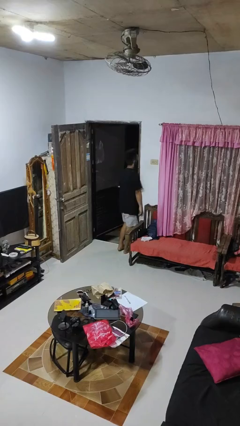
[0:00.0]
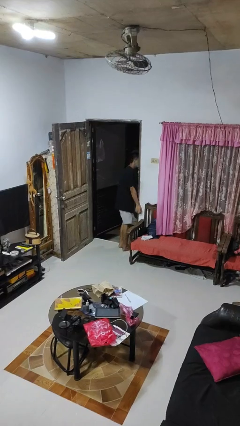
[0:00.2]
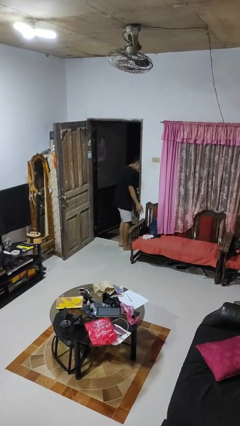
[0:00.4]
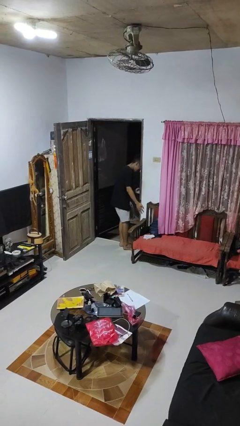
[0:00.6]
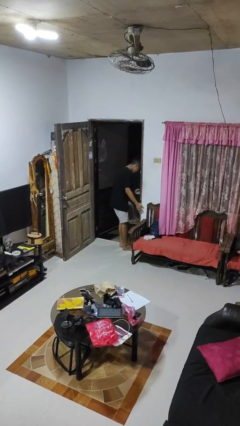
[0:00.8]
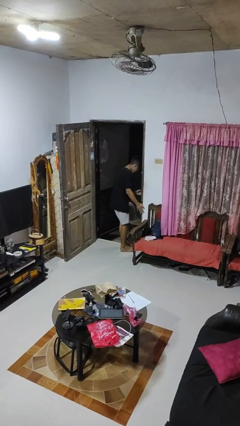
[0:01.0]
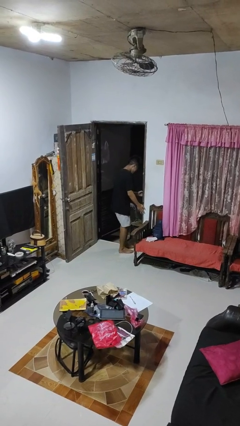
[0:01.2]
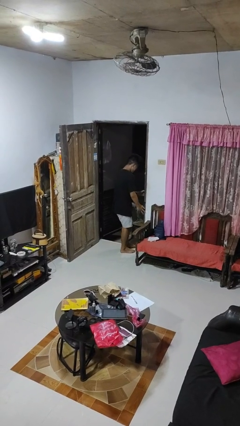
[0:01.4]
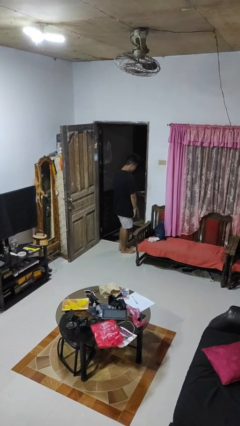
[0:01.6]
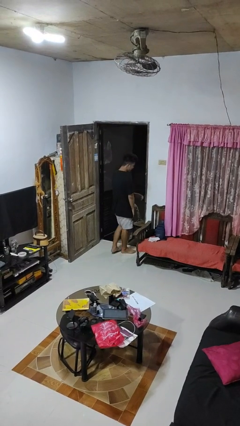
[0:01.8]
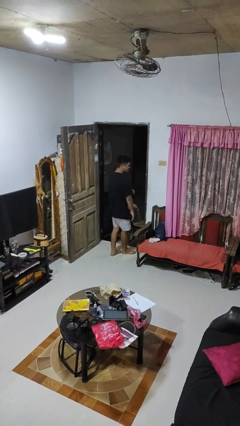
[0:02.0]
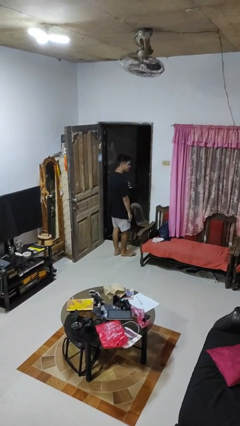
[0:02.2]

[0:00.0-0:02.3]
person bumps into wall

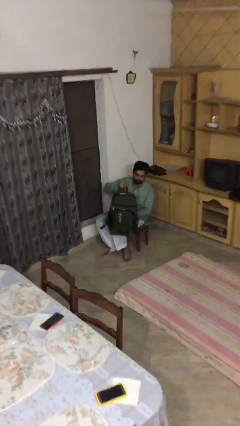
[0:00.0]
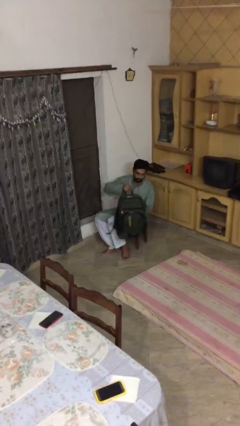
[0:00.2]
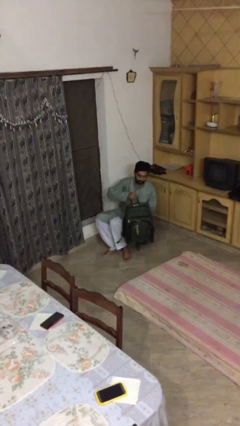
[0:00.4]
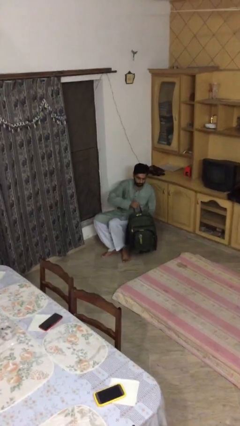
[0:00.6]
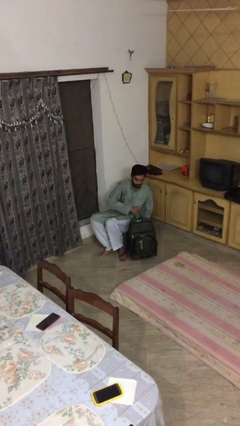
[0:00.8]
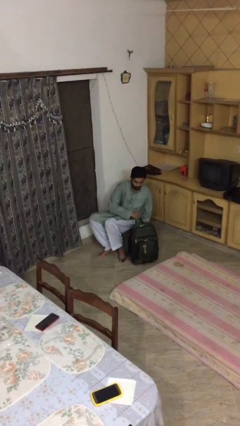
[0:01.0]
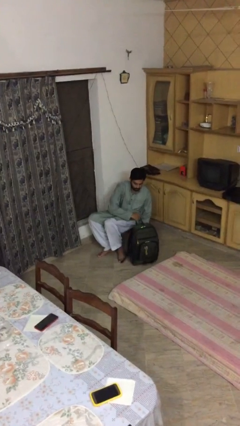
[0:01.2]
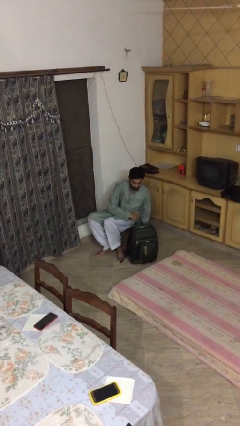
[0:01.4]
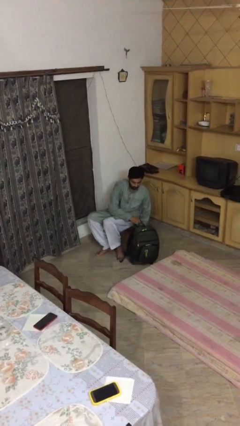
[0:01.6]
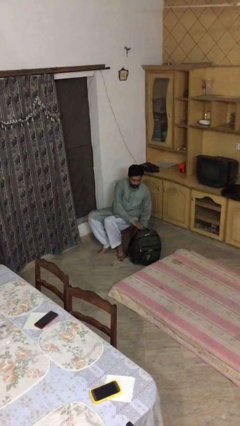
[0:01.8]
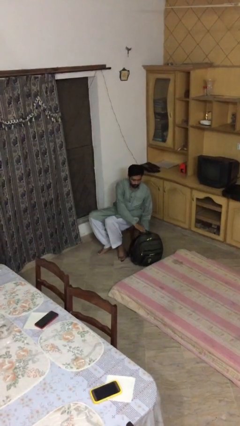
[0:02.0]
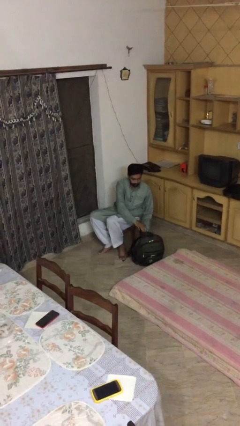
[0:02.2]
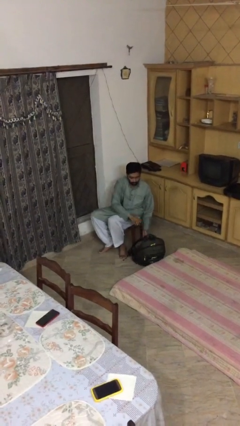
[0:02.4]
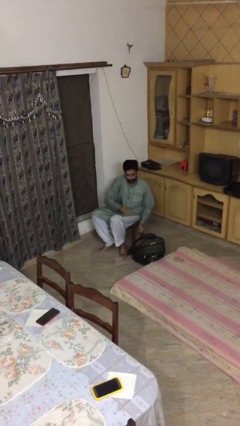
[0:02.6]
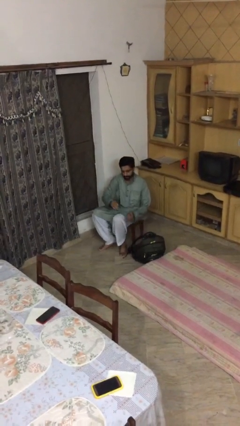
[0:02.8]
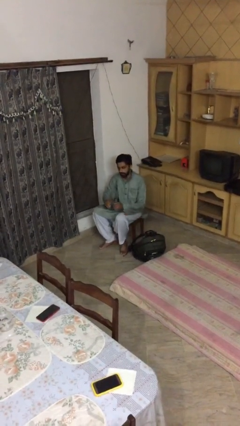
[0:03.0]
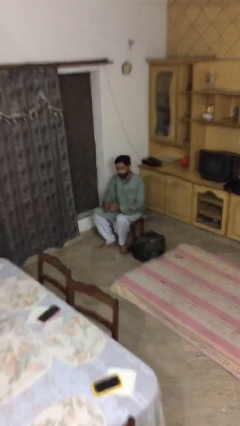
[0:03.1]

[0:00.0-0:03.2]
person puts down object on floor

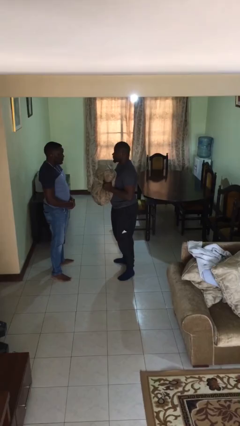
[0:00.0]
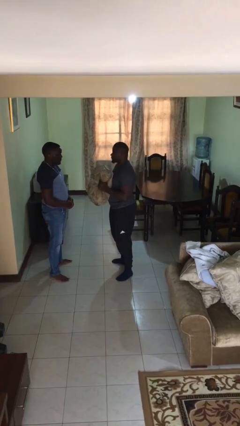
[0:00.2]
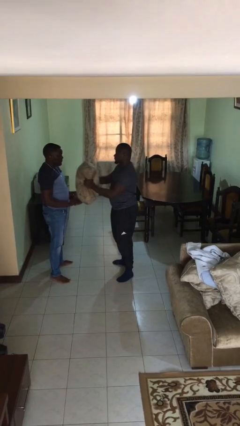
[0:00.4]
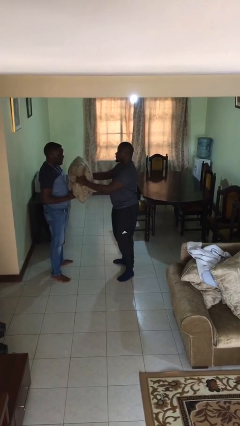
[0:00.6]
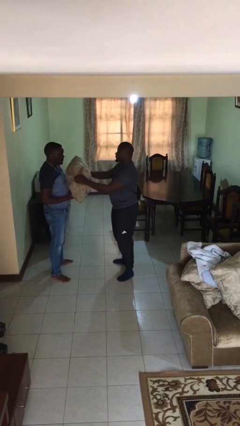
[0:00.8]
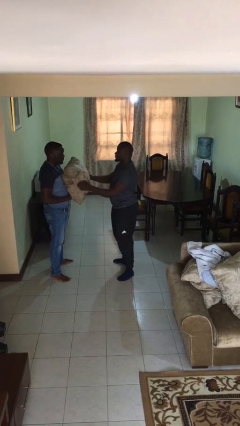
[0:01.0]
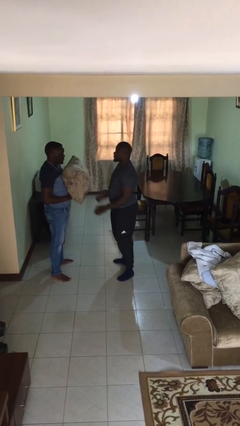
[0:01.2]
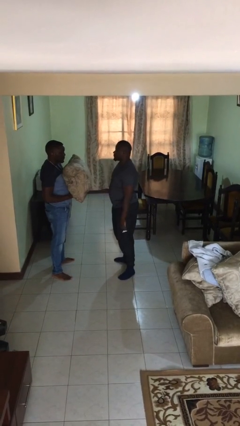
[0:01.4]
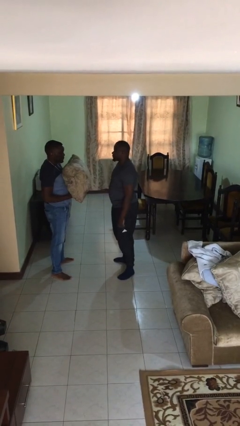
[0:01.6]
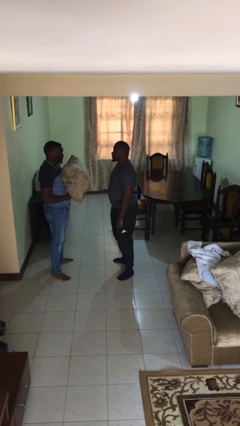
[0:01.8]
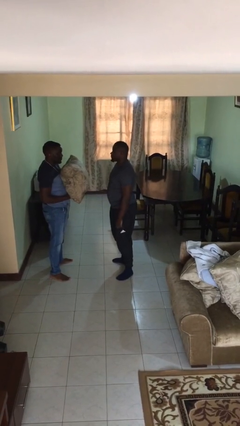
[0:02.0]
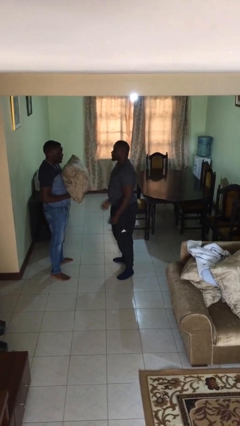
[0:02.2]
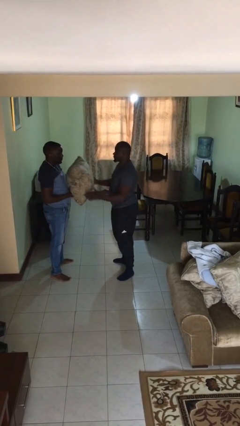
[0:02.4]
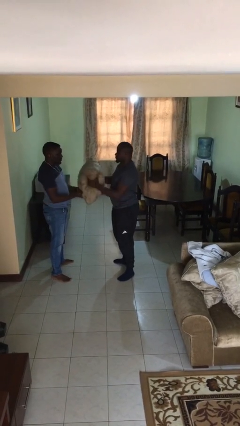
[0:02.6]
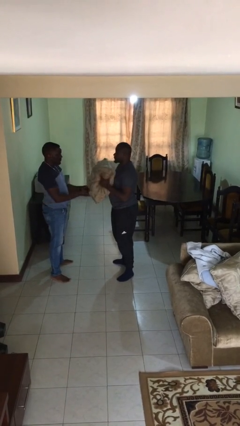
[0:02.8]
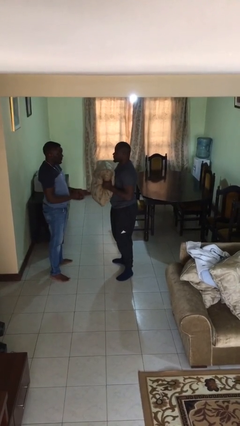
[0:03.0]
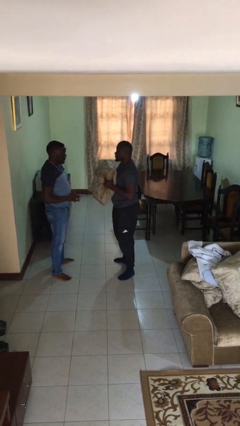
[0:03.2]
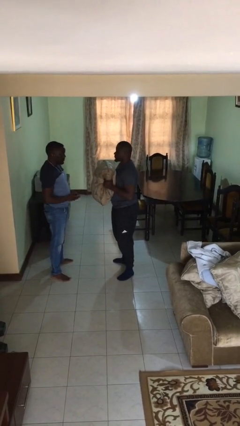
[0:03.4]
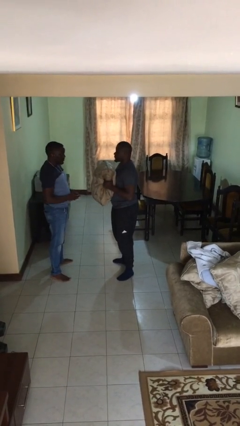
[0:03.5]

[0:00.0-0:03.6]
person transfers object to person

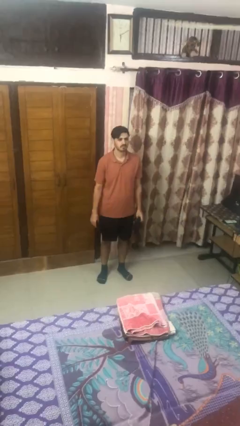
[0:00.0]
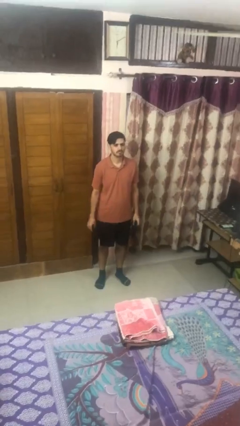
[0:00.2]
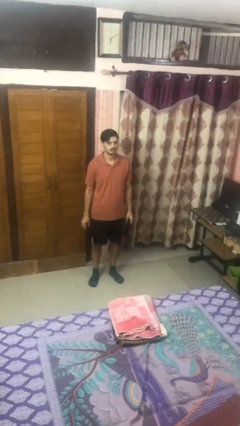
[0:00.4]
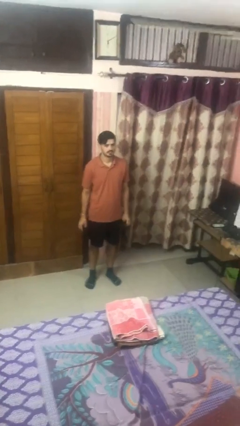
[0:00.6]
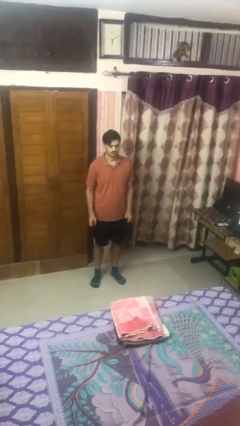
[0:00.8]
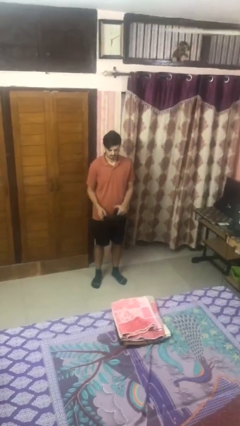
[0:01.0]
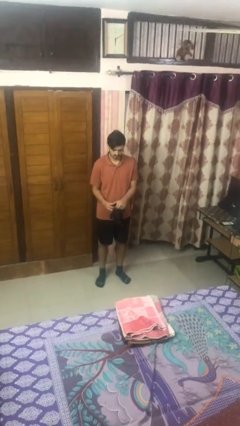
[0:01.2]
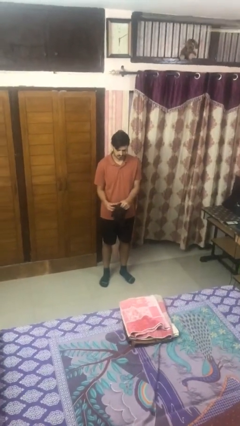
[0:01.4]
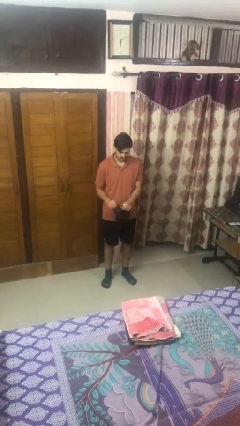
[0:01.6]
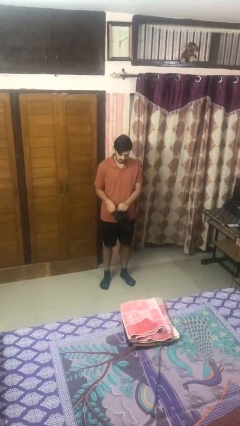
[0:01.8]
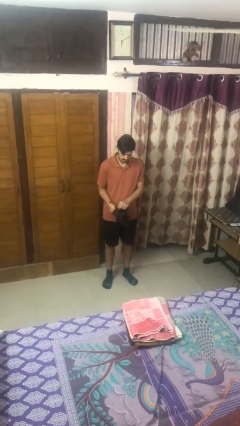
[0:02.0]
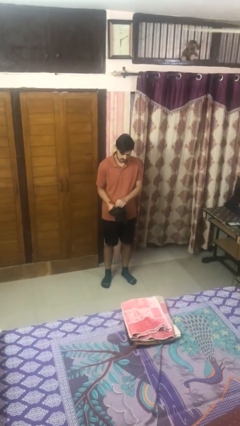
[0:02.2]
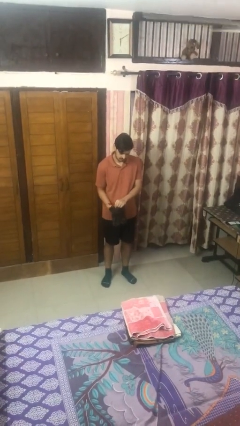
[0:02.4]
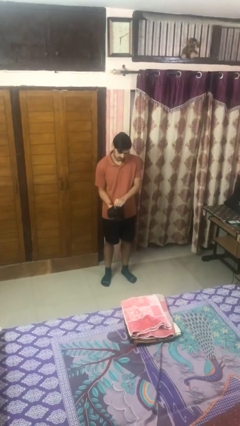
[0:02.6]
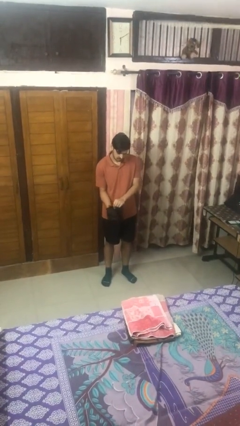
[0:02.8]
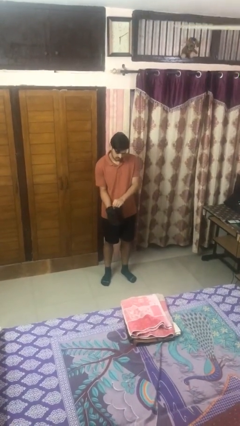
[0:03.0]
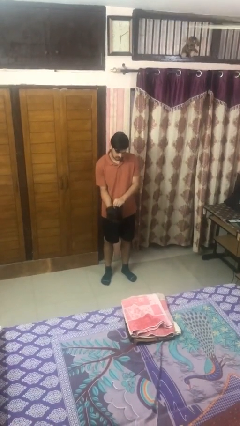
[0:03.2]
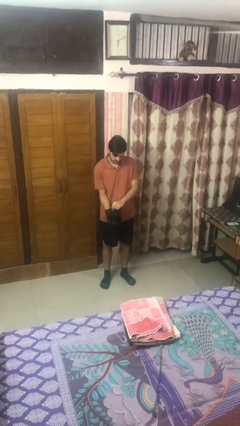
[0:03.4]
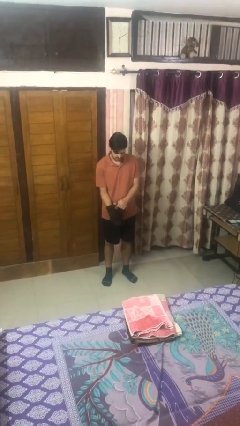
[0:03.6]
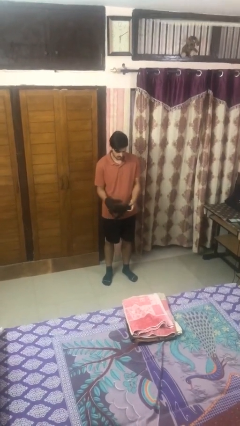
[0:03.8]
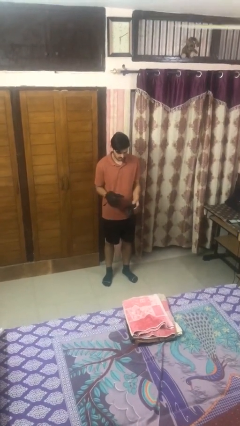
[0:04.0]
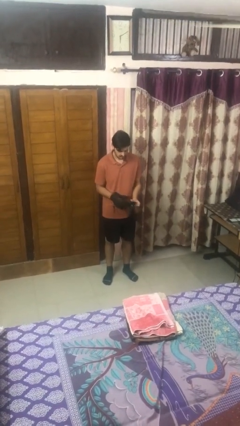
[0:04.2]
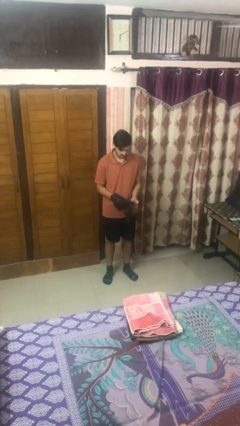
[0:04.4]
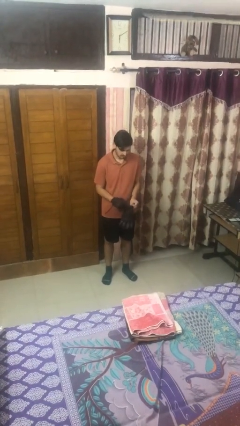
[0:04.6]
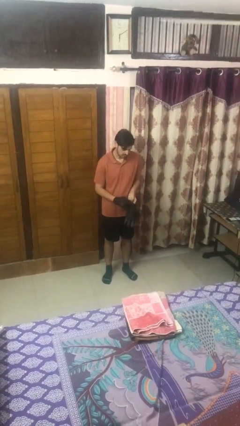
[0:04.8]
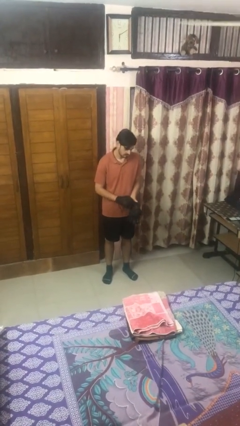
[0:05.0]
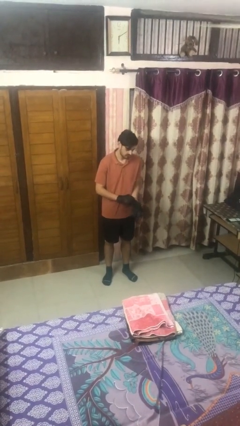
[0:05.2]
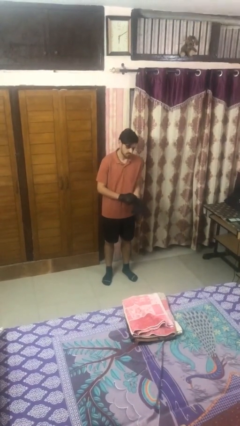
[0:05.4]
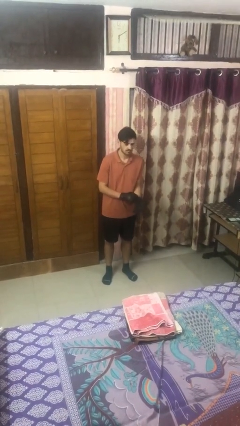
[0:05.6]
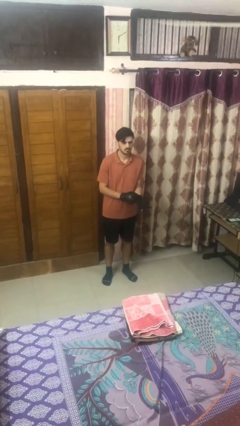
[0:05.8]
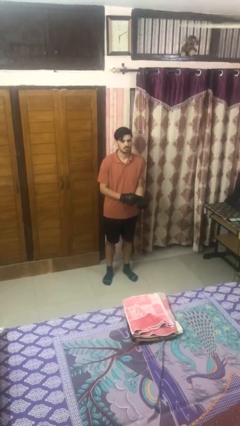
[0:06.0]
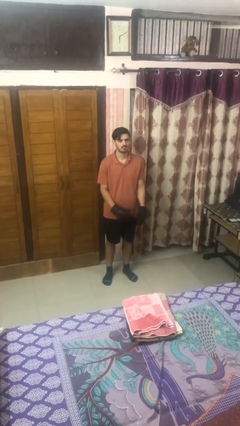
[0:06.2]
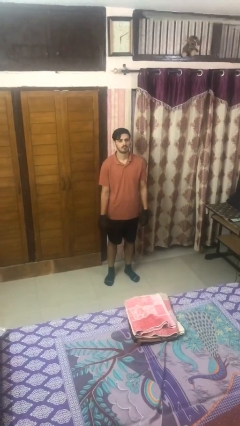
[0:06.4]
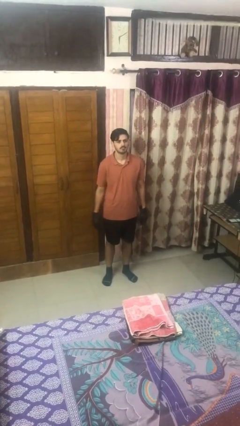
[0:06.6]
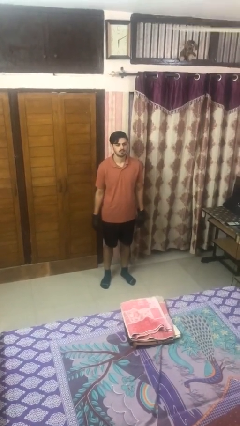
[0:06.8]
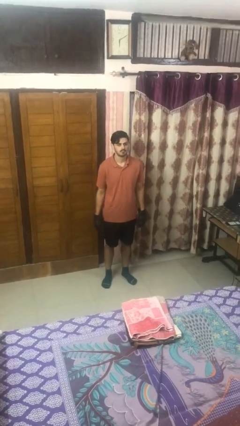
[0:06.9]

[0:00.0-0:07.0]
person puts on gloves

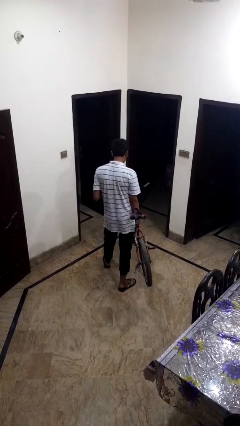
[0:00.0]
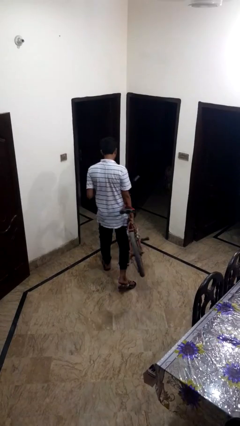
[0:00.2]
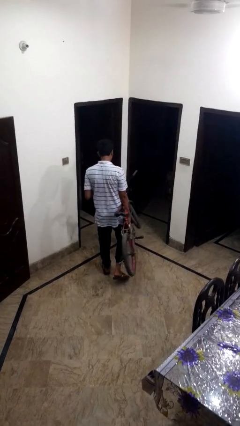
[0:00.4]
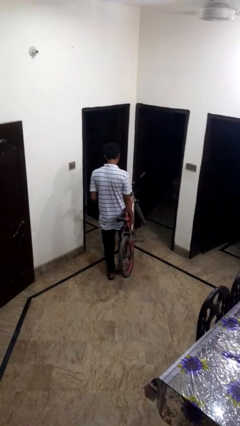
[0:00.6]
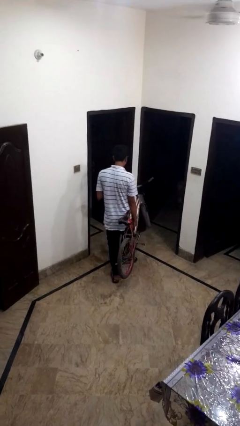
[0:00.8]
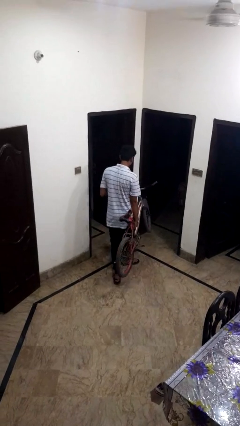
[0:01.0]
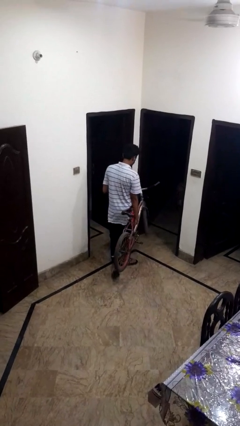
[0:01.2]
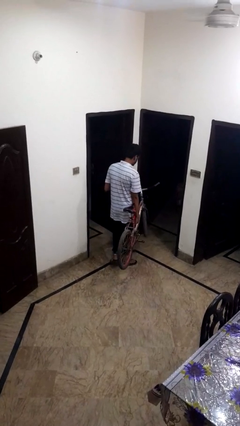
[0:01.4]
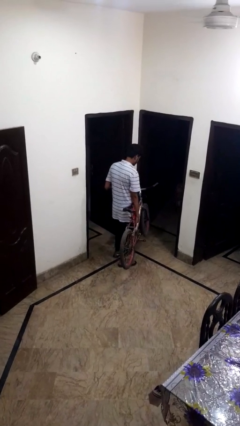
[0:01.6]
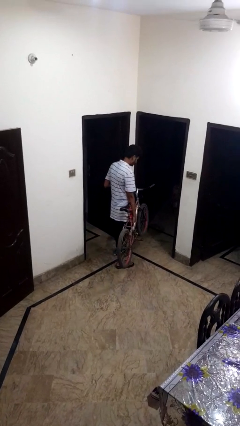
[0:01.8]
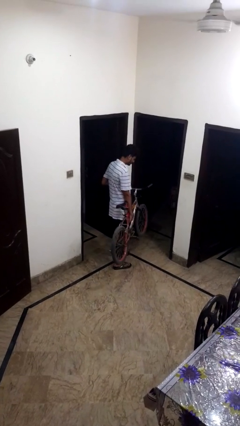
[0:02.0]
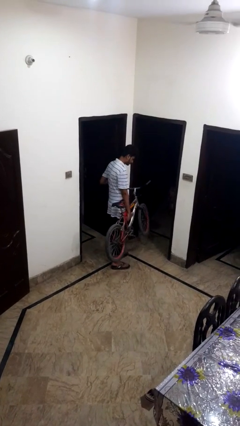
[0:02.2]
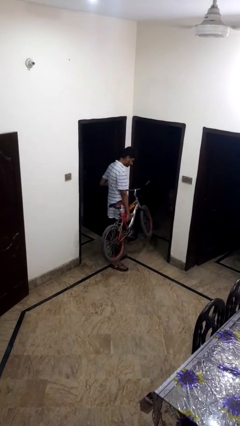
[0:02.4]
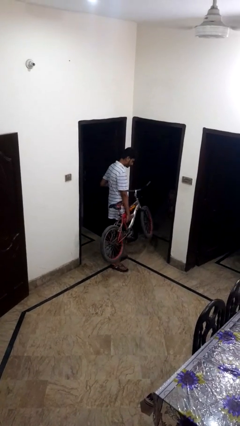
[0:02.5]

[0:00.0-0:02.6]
person carries bicycle
